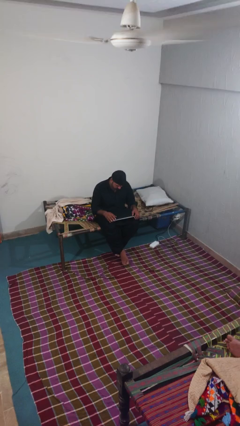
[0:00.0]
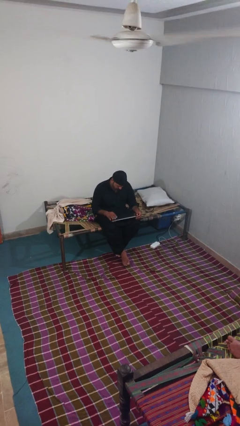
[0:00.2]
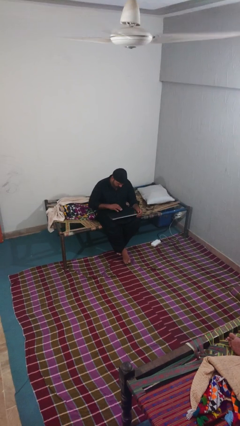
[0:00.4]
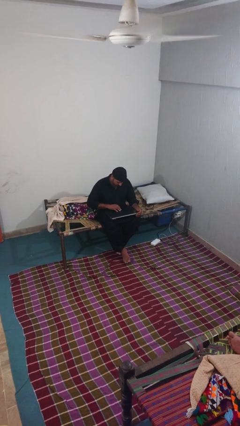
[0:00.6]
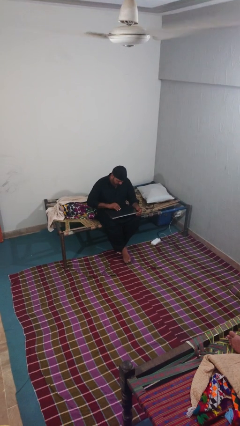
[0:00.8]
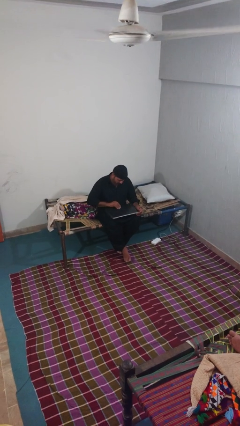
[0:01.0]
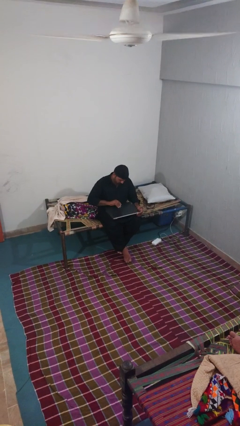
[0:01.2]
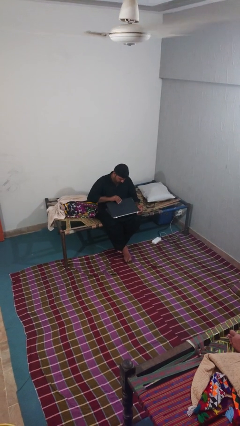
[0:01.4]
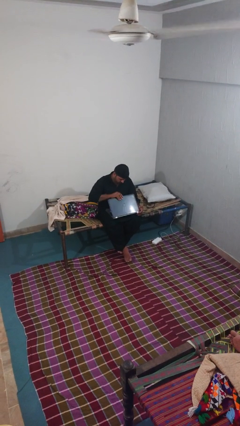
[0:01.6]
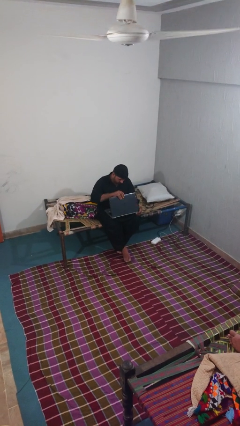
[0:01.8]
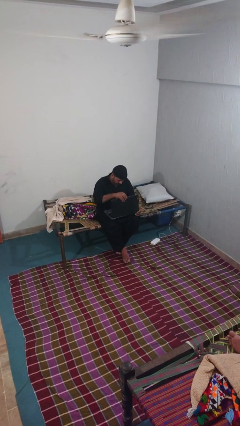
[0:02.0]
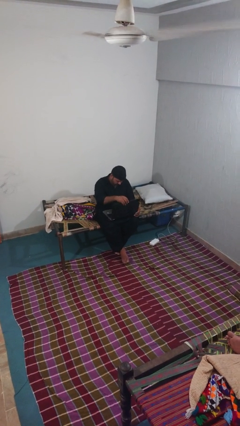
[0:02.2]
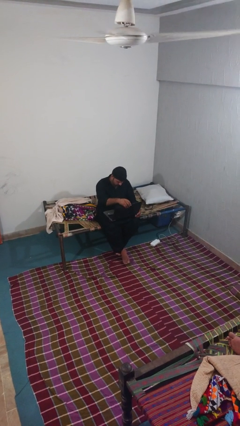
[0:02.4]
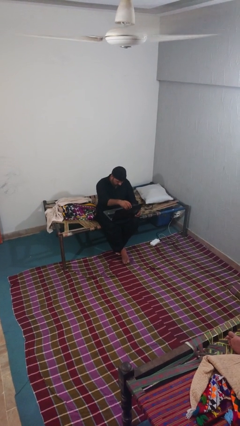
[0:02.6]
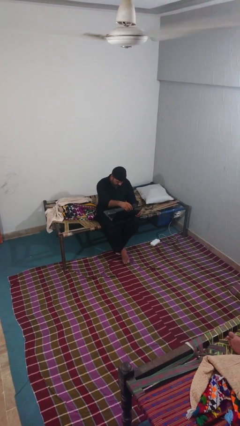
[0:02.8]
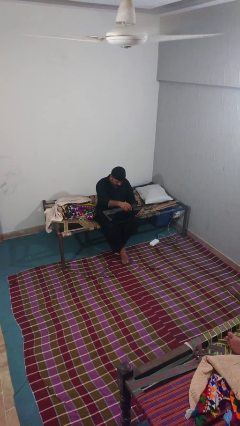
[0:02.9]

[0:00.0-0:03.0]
person opens laptop

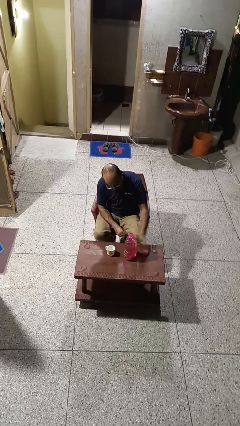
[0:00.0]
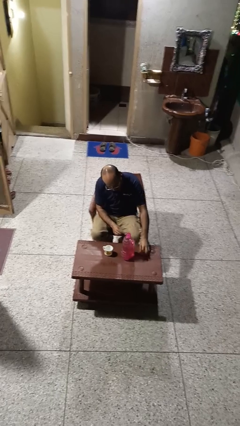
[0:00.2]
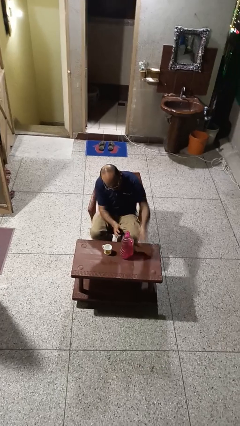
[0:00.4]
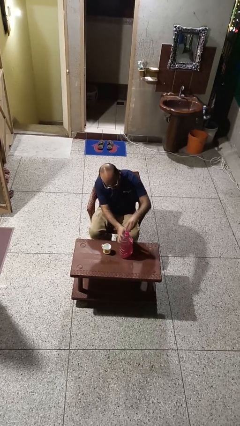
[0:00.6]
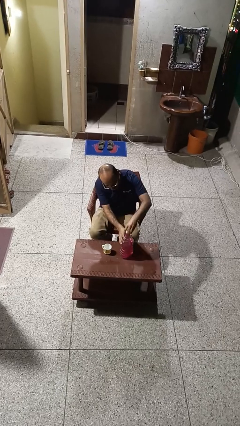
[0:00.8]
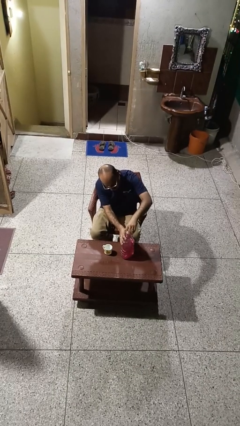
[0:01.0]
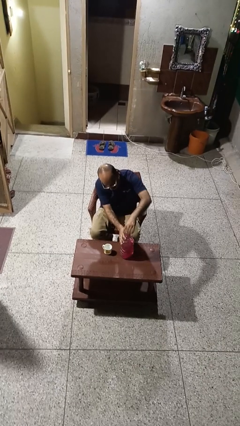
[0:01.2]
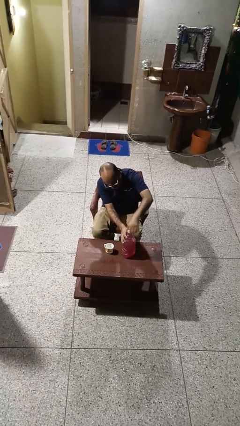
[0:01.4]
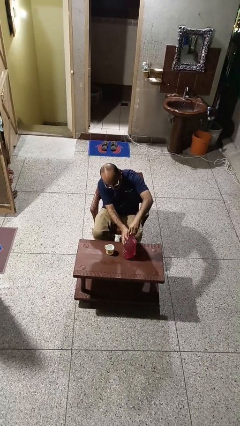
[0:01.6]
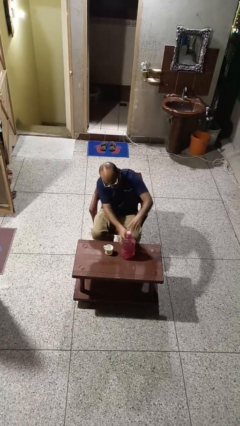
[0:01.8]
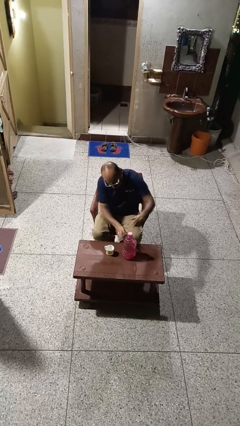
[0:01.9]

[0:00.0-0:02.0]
person screws lid to bottle

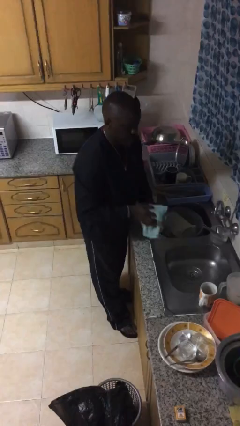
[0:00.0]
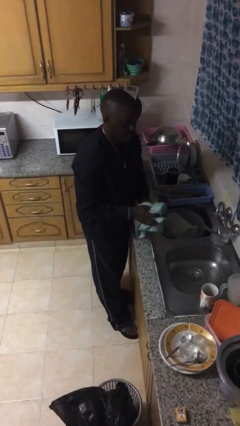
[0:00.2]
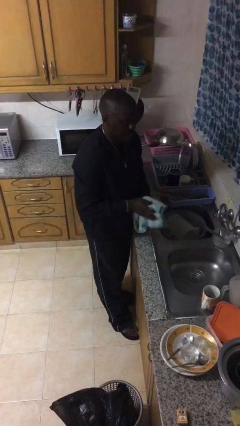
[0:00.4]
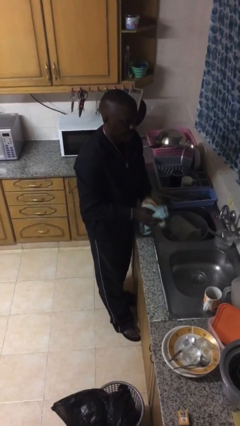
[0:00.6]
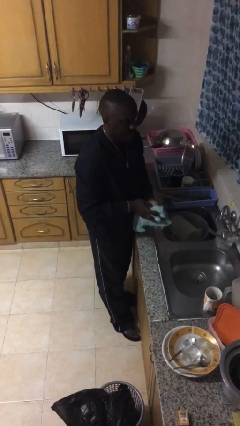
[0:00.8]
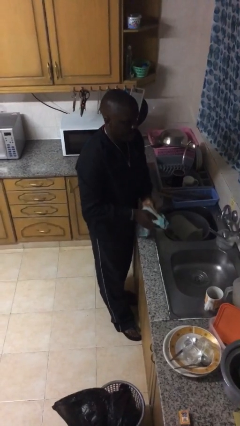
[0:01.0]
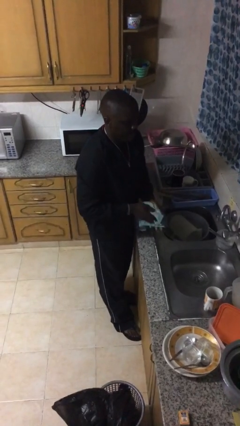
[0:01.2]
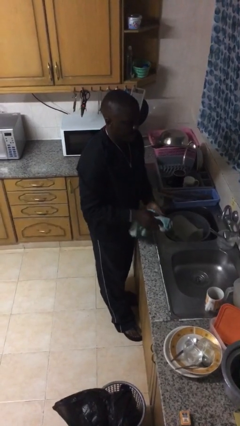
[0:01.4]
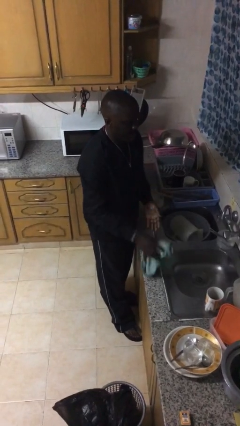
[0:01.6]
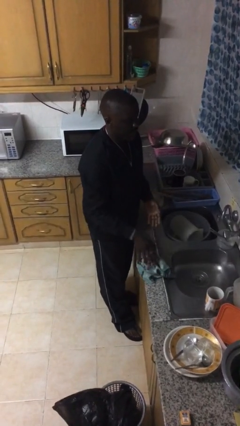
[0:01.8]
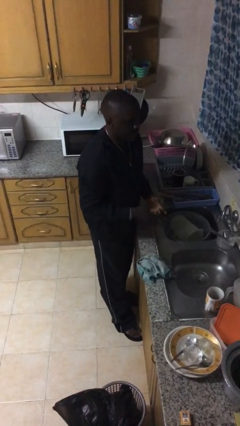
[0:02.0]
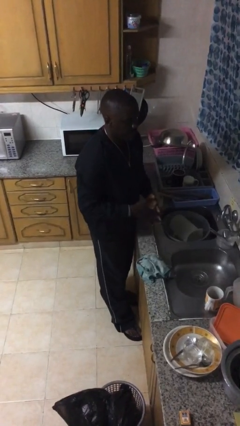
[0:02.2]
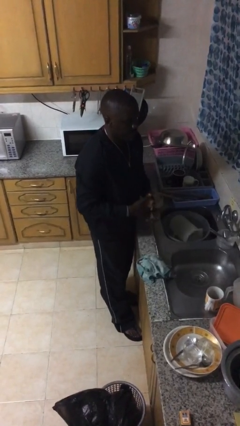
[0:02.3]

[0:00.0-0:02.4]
person dries hands with towel

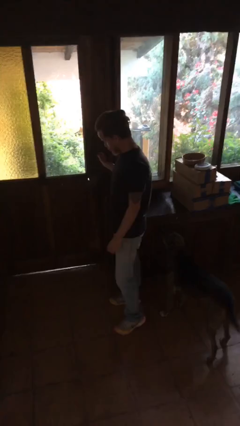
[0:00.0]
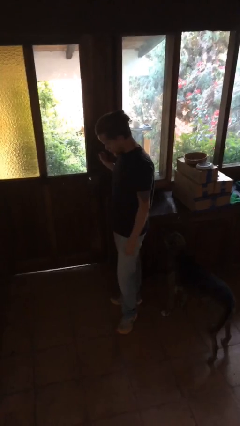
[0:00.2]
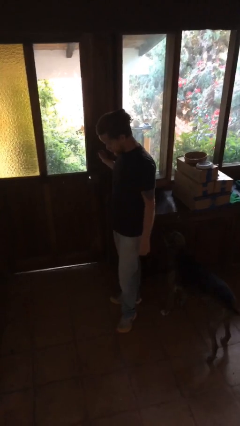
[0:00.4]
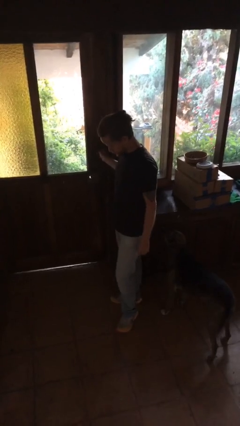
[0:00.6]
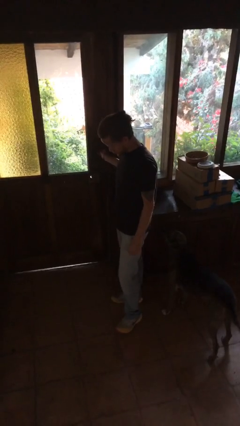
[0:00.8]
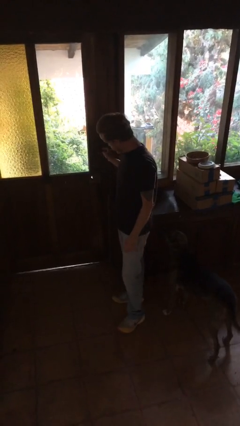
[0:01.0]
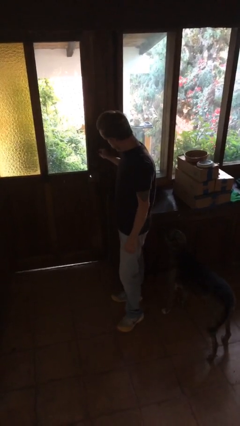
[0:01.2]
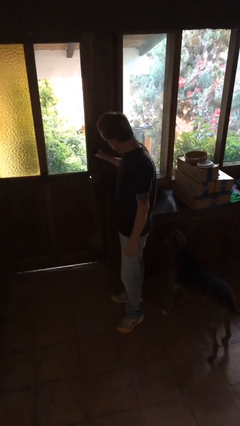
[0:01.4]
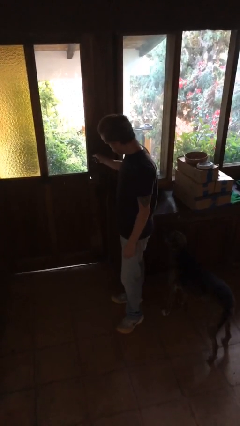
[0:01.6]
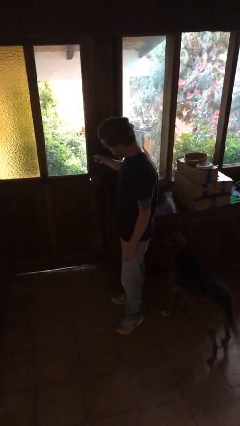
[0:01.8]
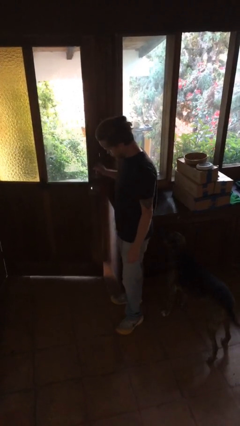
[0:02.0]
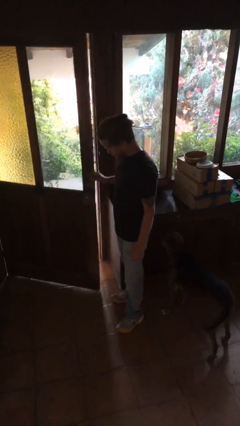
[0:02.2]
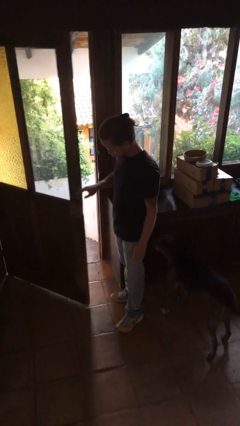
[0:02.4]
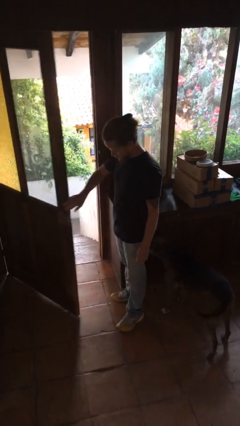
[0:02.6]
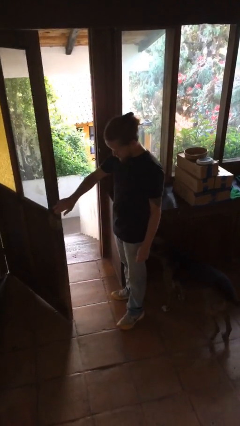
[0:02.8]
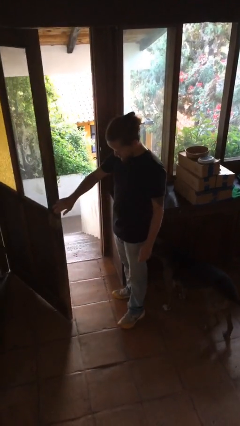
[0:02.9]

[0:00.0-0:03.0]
person opens facility door

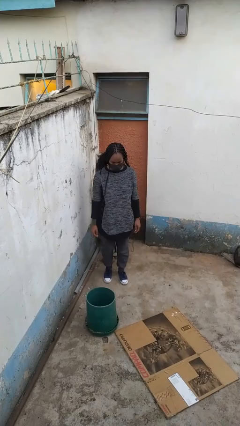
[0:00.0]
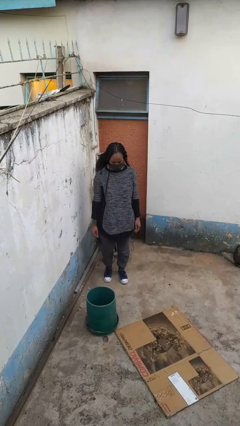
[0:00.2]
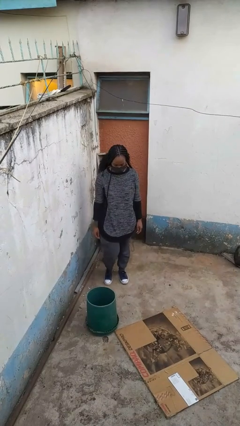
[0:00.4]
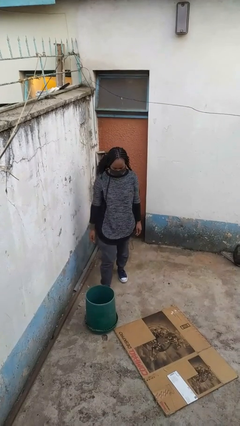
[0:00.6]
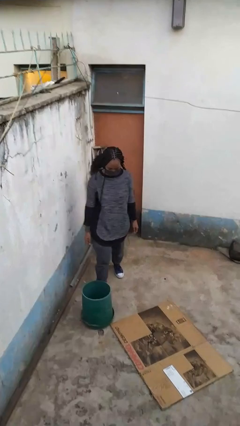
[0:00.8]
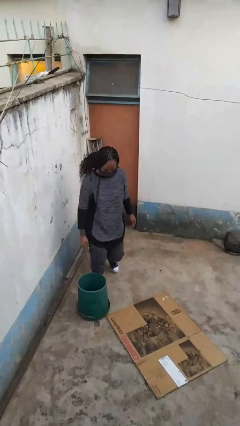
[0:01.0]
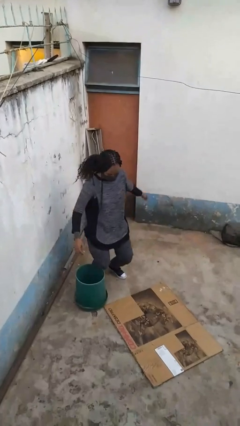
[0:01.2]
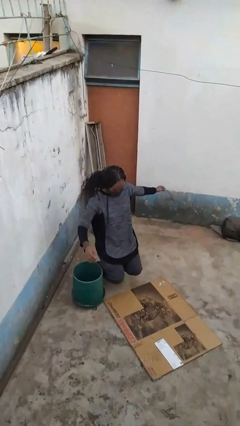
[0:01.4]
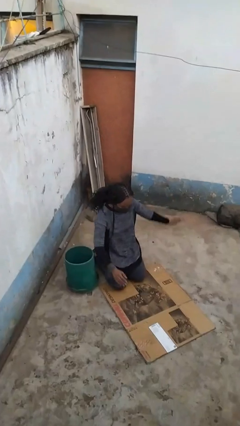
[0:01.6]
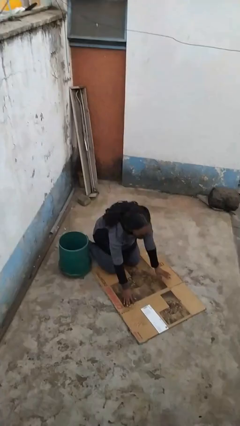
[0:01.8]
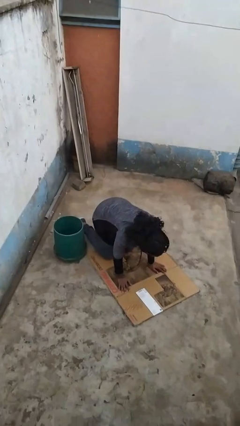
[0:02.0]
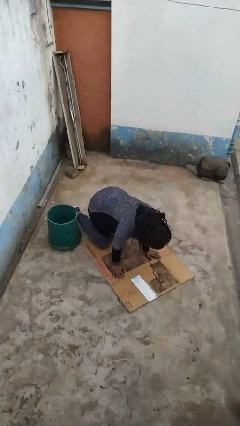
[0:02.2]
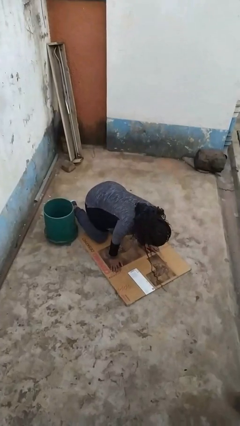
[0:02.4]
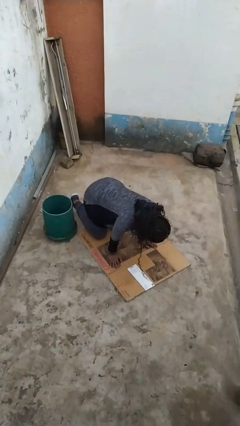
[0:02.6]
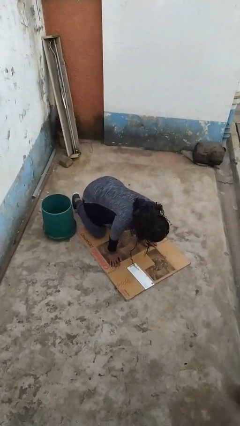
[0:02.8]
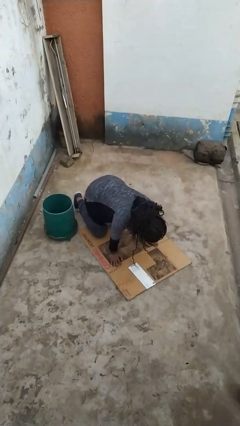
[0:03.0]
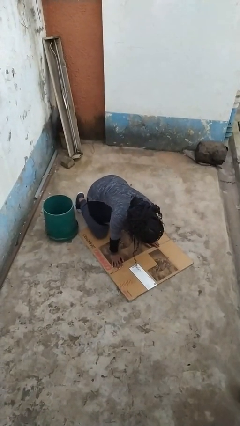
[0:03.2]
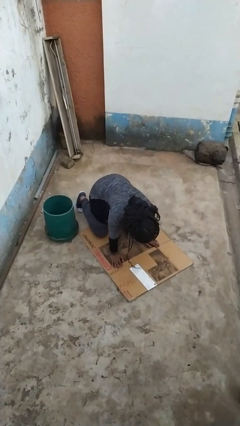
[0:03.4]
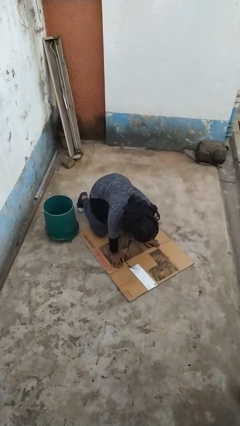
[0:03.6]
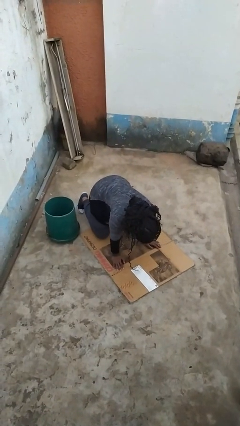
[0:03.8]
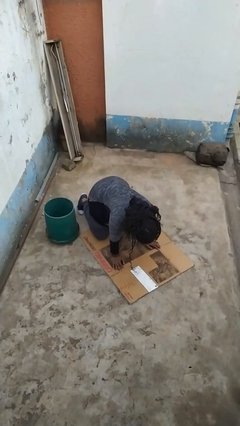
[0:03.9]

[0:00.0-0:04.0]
person trips on object on floor

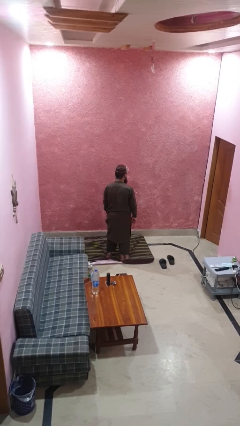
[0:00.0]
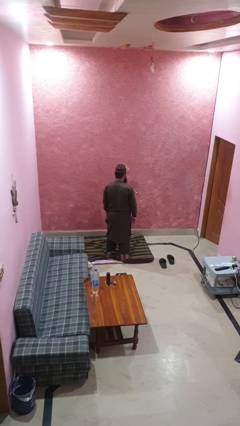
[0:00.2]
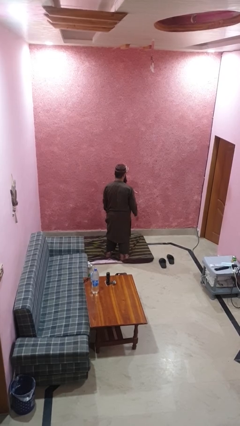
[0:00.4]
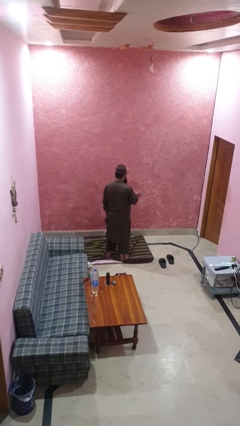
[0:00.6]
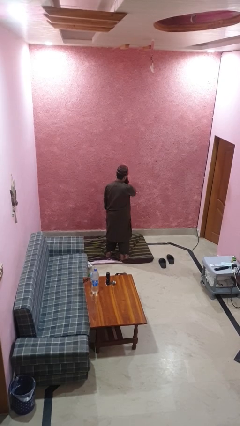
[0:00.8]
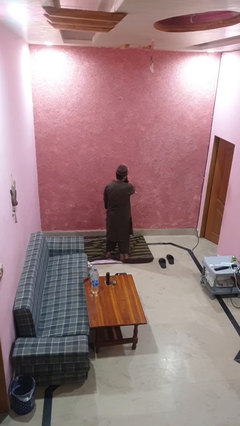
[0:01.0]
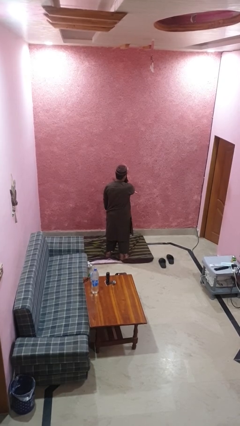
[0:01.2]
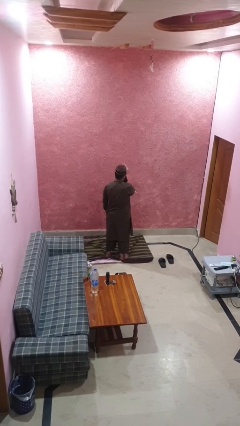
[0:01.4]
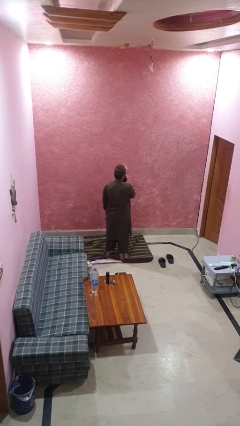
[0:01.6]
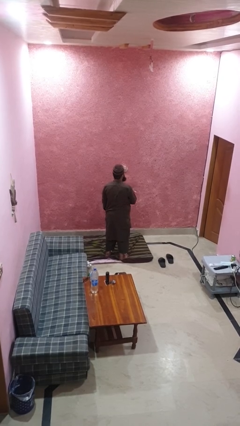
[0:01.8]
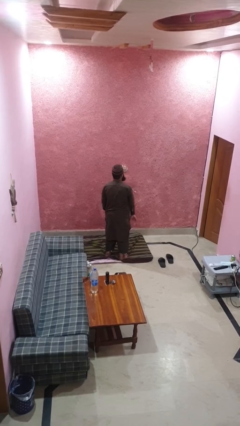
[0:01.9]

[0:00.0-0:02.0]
person drums on chest

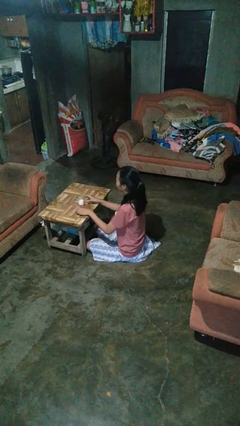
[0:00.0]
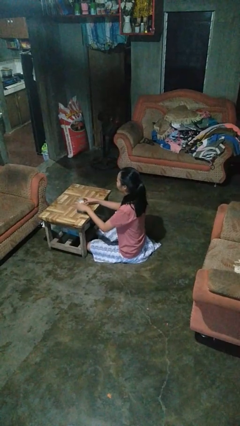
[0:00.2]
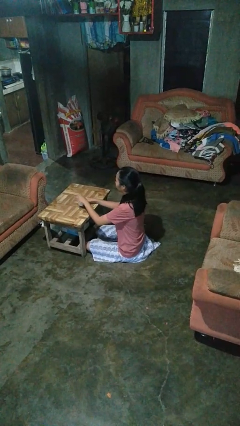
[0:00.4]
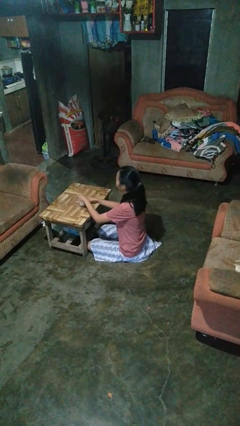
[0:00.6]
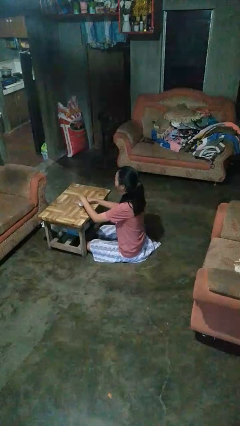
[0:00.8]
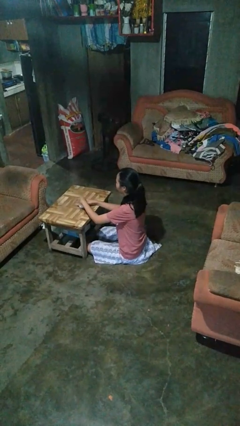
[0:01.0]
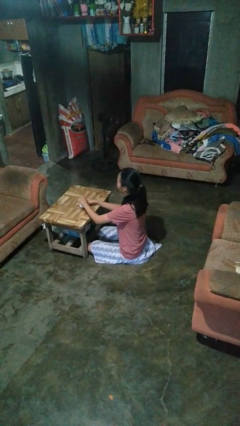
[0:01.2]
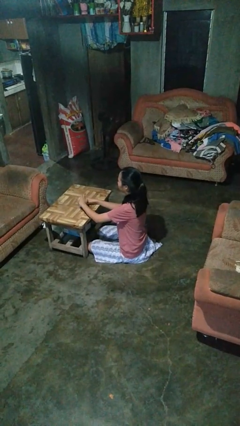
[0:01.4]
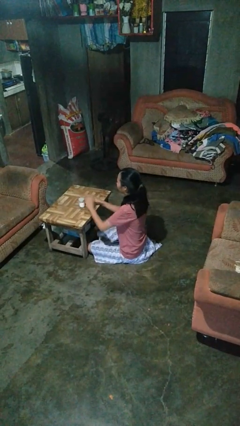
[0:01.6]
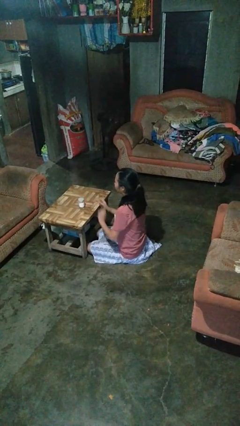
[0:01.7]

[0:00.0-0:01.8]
person closes jar
